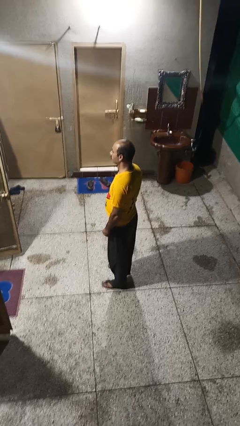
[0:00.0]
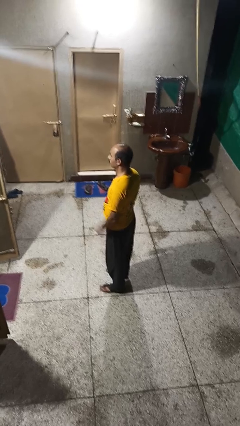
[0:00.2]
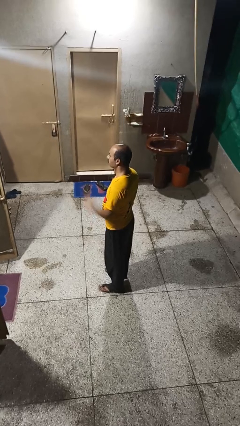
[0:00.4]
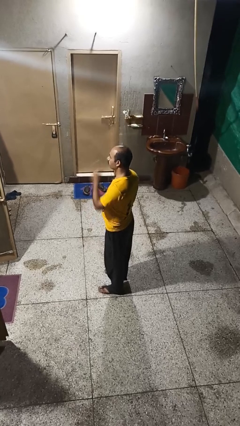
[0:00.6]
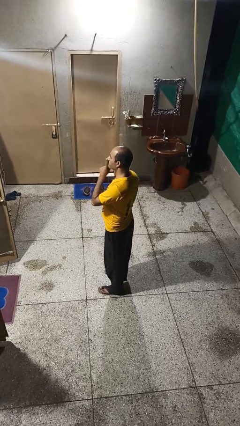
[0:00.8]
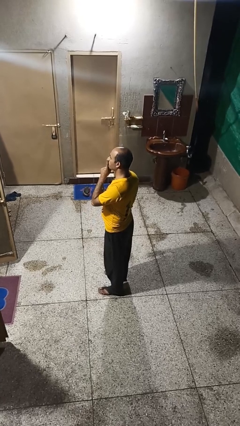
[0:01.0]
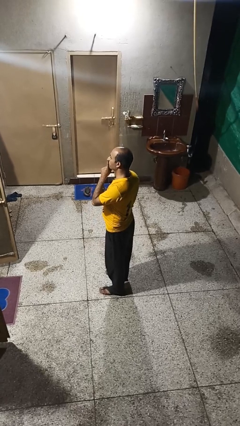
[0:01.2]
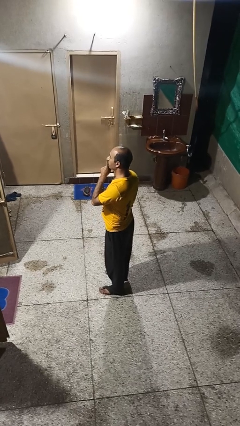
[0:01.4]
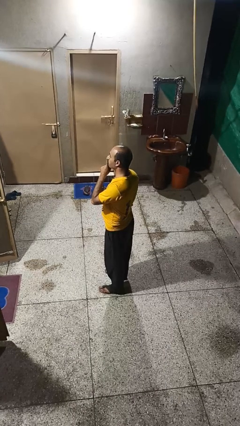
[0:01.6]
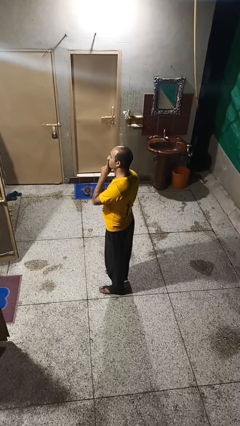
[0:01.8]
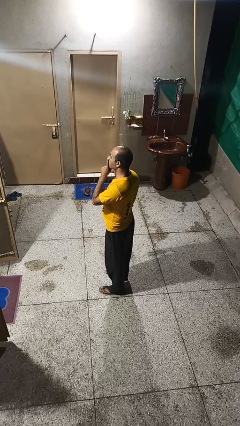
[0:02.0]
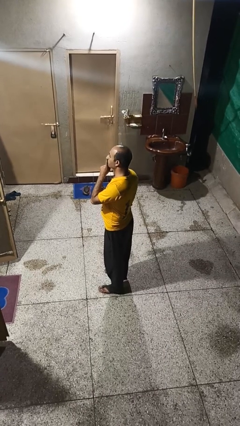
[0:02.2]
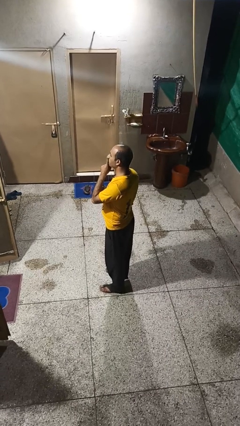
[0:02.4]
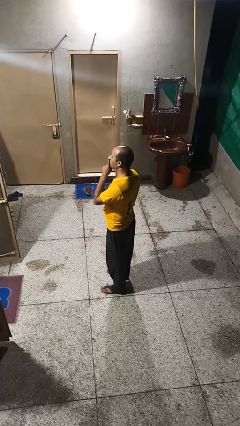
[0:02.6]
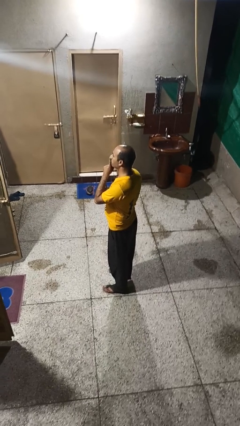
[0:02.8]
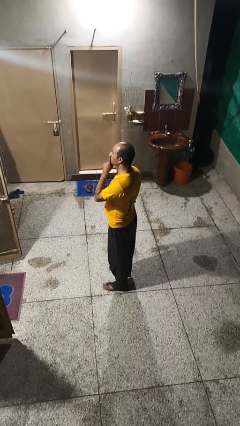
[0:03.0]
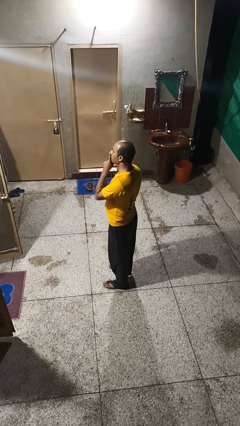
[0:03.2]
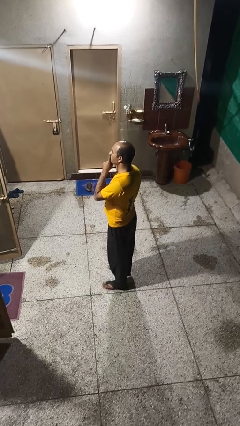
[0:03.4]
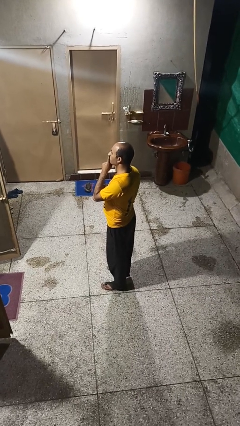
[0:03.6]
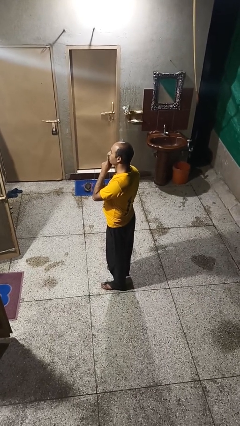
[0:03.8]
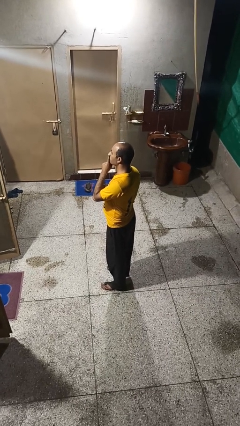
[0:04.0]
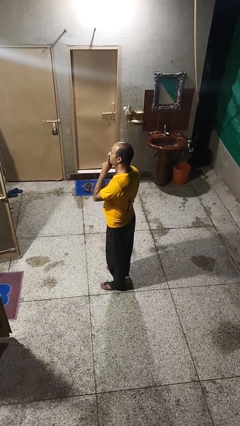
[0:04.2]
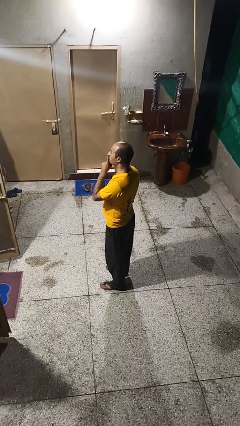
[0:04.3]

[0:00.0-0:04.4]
person gestures be quiet

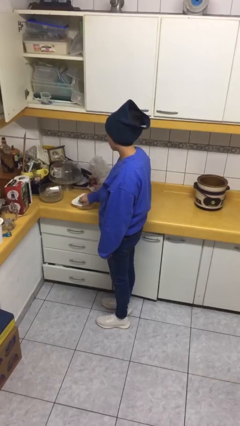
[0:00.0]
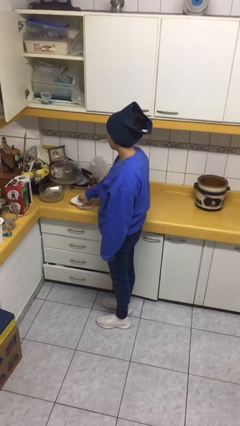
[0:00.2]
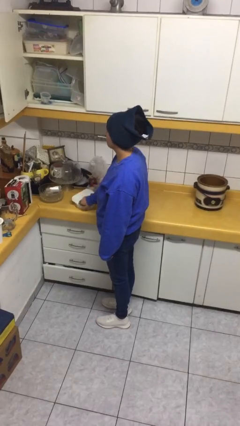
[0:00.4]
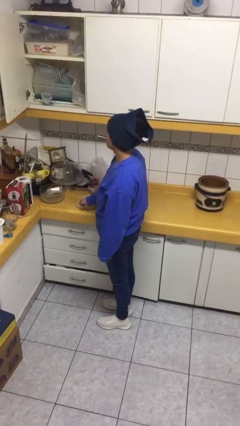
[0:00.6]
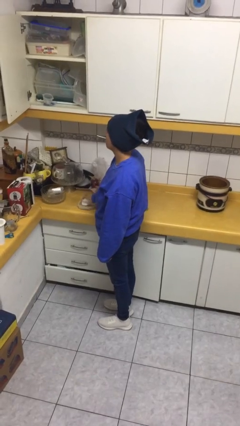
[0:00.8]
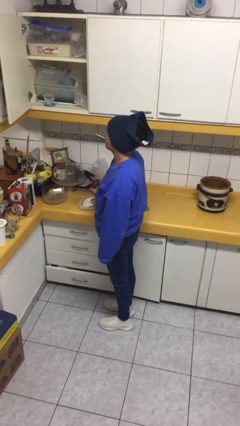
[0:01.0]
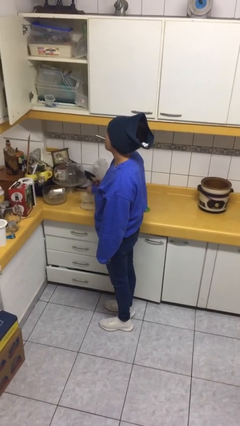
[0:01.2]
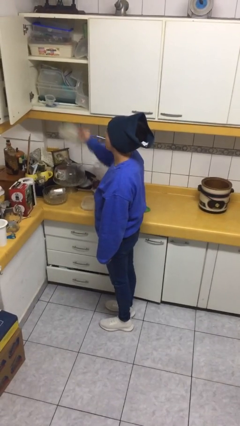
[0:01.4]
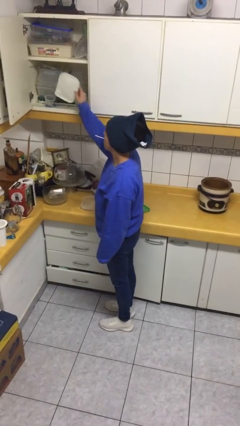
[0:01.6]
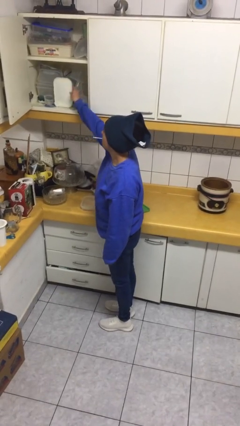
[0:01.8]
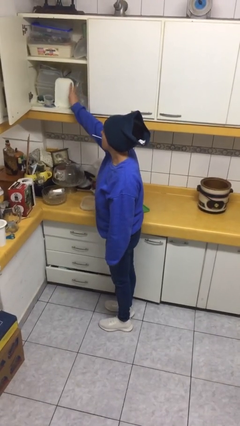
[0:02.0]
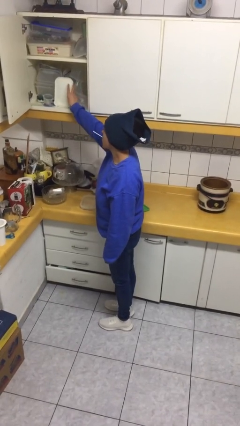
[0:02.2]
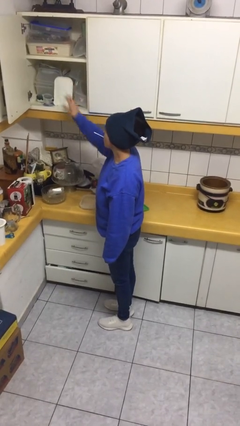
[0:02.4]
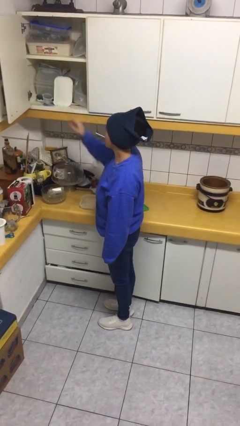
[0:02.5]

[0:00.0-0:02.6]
person puts object in cabinet

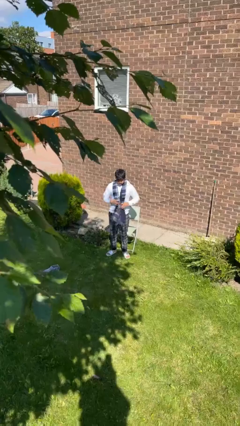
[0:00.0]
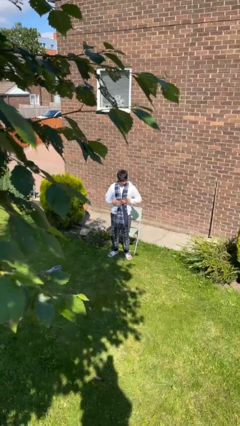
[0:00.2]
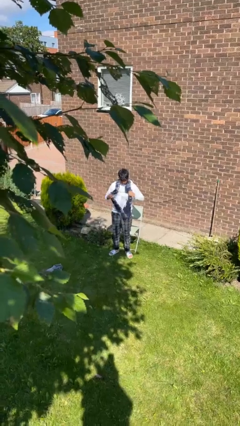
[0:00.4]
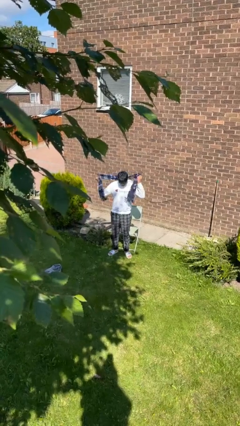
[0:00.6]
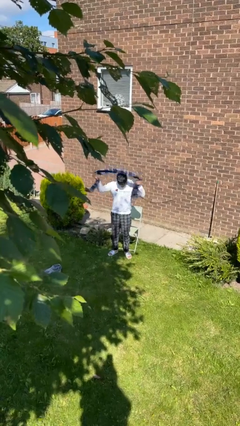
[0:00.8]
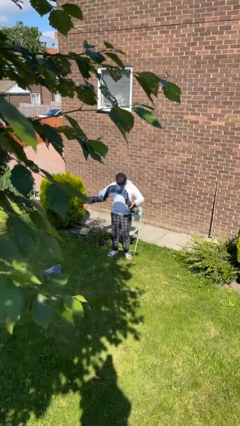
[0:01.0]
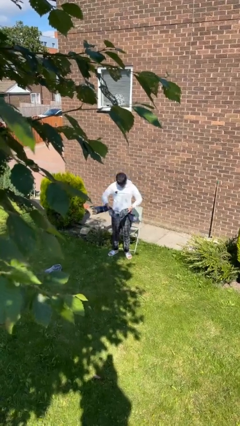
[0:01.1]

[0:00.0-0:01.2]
person takes off scarf

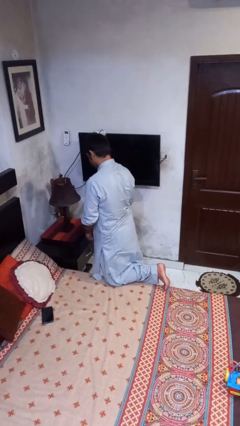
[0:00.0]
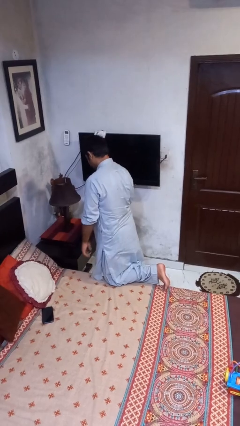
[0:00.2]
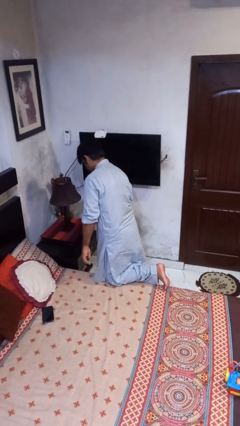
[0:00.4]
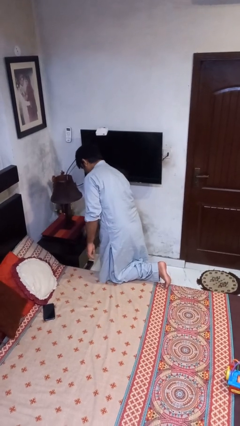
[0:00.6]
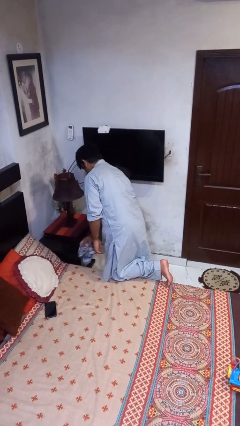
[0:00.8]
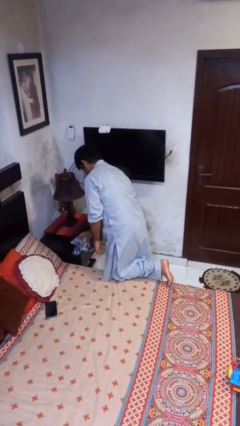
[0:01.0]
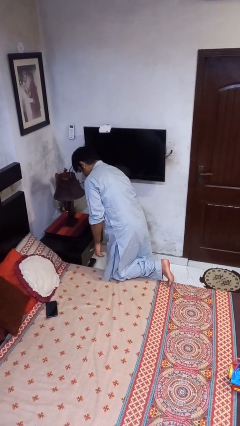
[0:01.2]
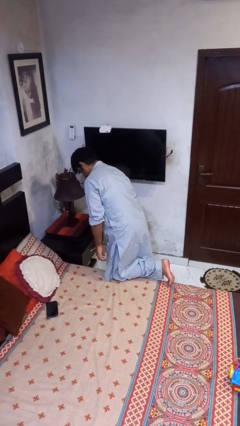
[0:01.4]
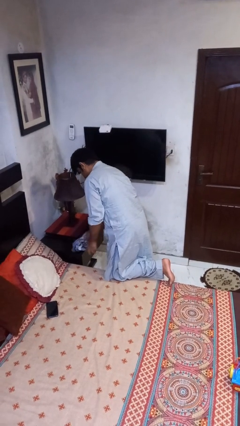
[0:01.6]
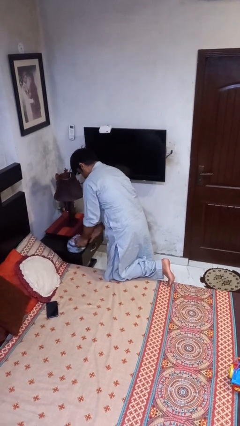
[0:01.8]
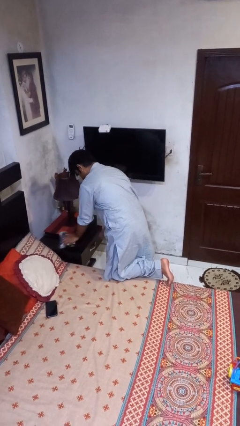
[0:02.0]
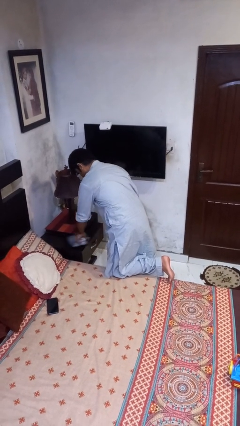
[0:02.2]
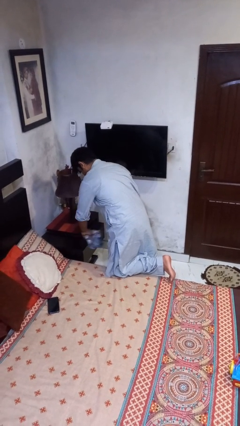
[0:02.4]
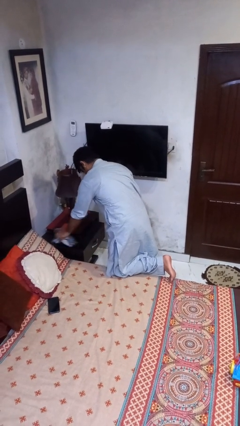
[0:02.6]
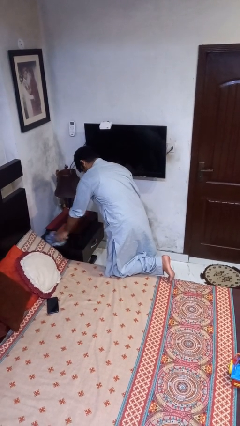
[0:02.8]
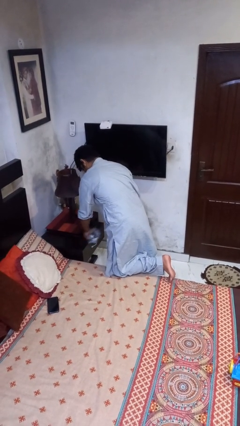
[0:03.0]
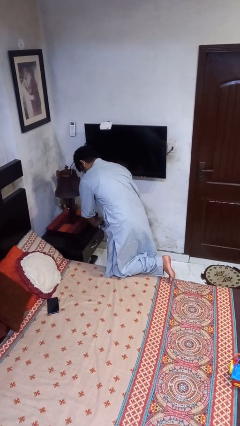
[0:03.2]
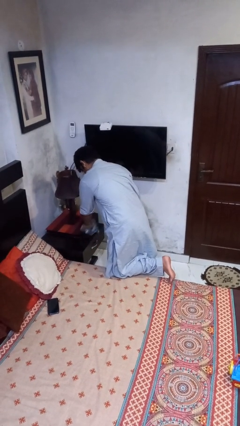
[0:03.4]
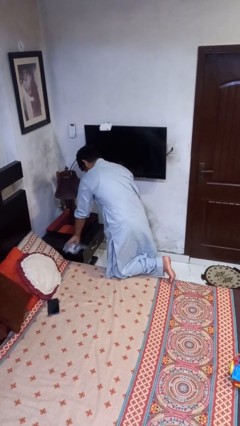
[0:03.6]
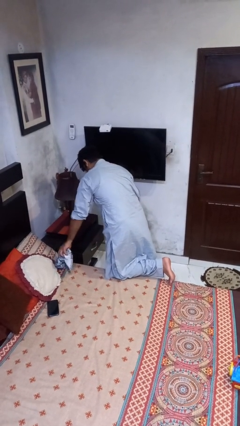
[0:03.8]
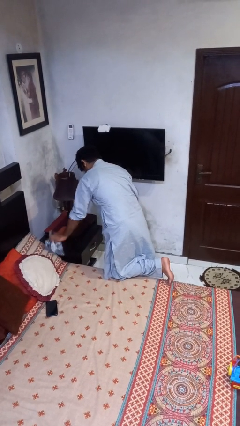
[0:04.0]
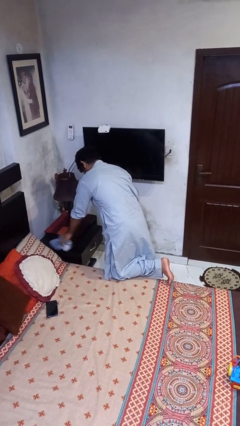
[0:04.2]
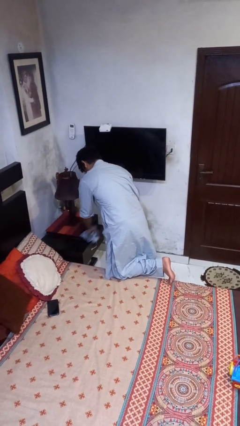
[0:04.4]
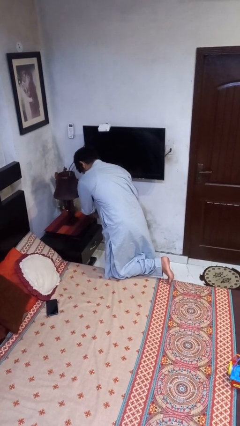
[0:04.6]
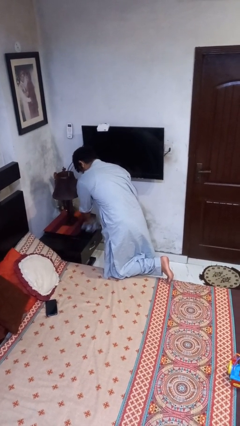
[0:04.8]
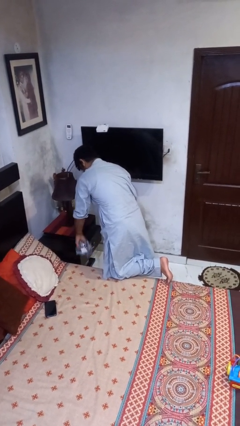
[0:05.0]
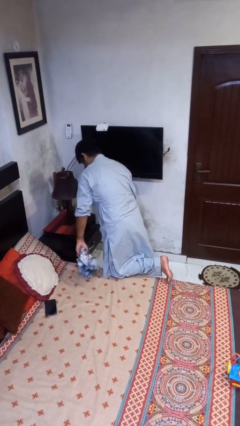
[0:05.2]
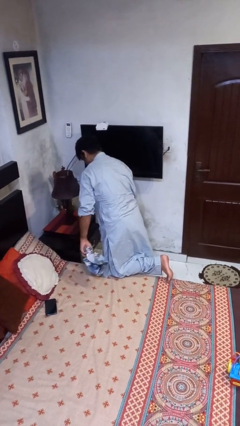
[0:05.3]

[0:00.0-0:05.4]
person cleans table with rag

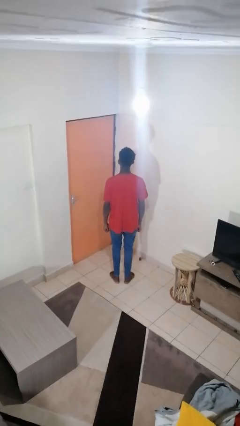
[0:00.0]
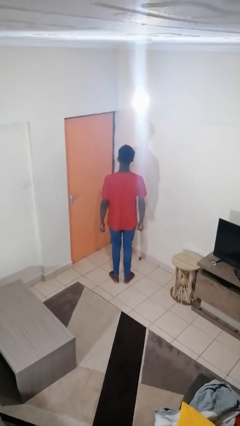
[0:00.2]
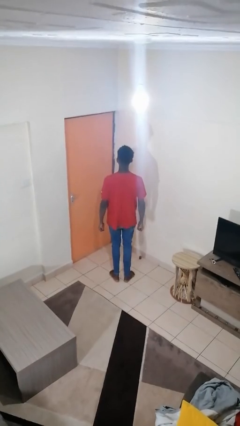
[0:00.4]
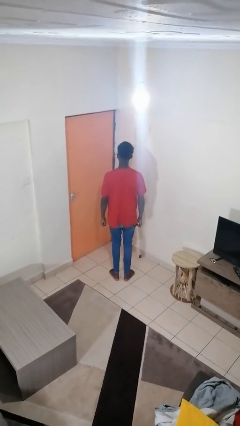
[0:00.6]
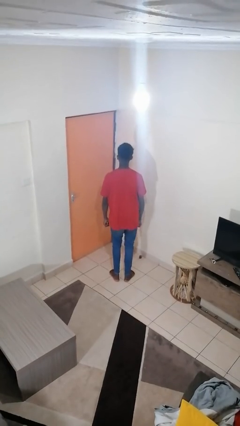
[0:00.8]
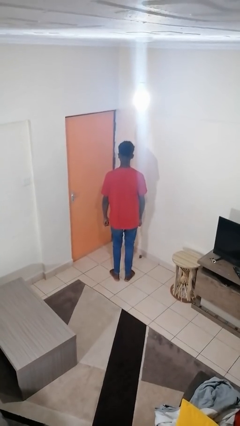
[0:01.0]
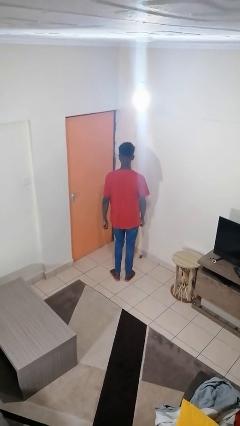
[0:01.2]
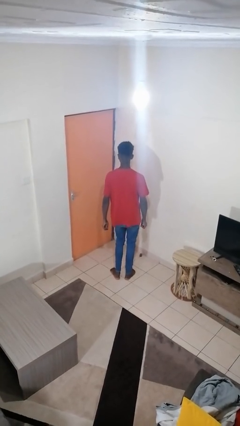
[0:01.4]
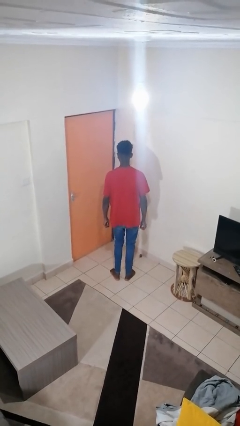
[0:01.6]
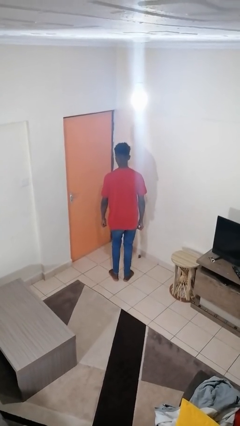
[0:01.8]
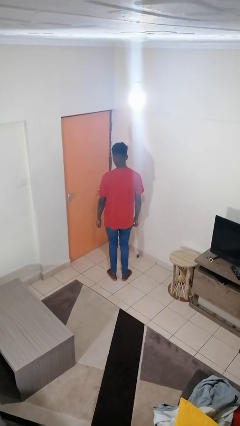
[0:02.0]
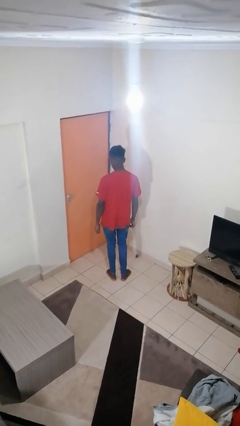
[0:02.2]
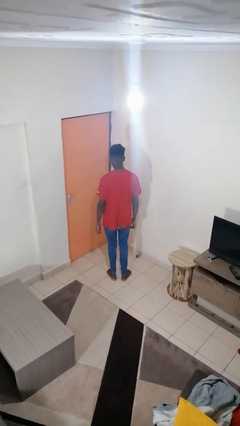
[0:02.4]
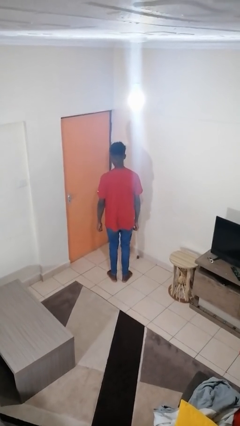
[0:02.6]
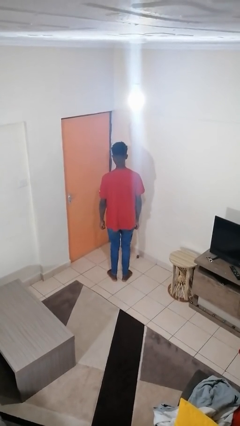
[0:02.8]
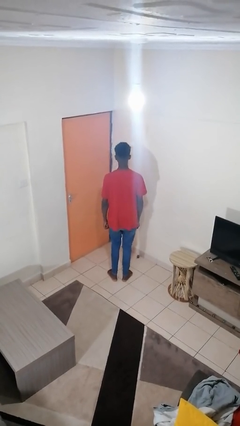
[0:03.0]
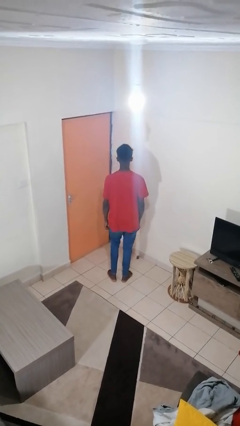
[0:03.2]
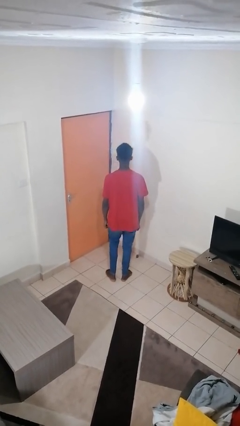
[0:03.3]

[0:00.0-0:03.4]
person wiggles hips

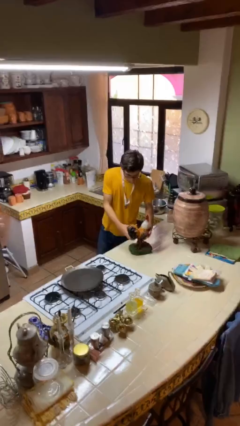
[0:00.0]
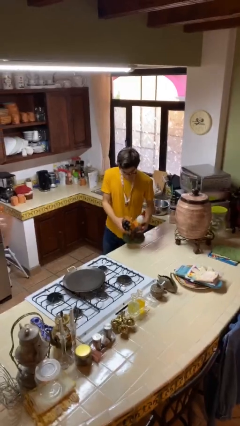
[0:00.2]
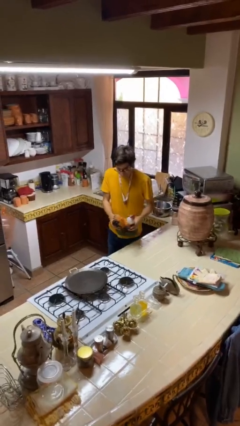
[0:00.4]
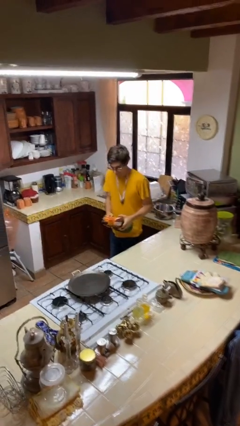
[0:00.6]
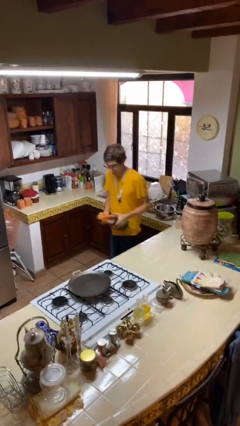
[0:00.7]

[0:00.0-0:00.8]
person picks up object from table
